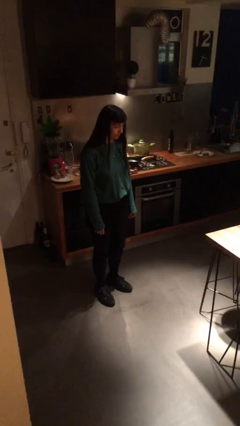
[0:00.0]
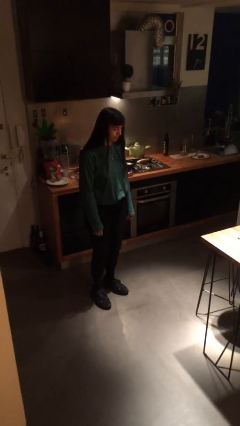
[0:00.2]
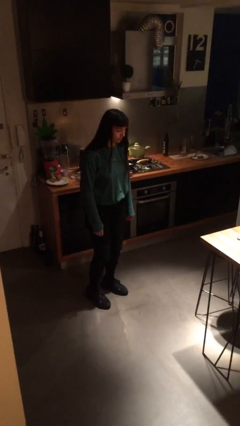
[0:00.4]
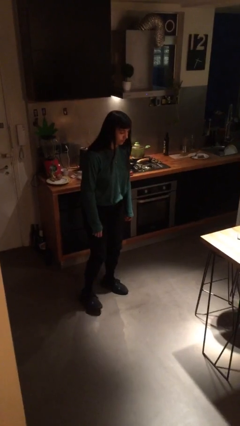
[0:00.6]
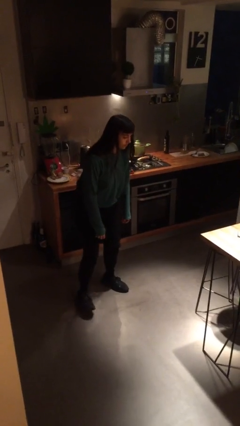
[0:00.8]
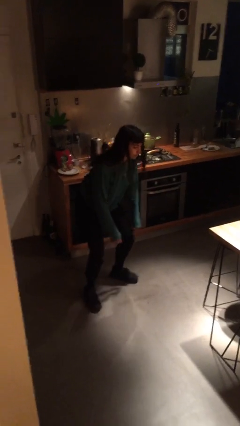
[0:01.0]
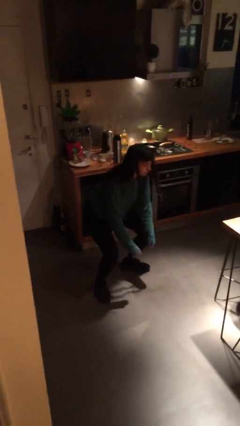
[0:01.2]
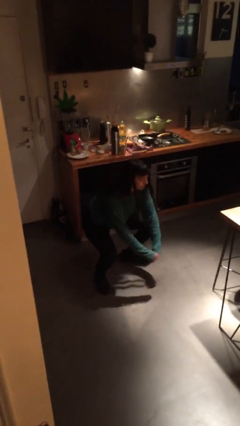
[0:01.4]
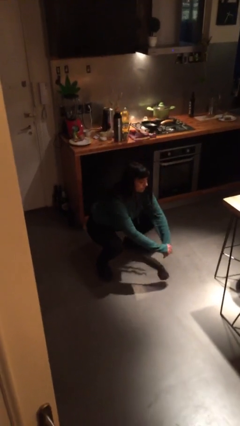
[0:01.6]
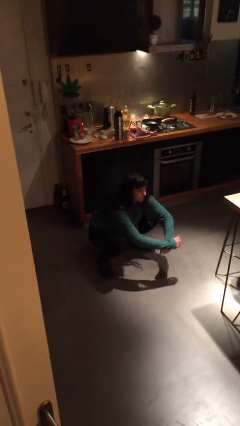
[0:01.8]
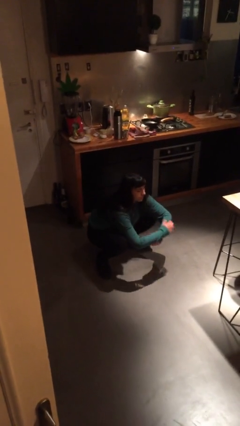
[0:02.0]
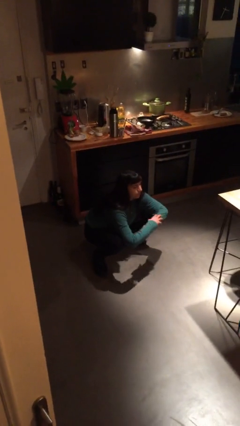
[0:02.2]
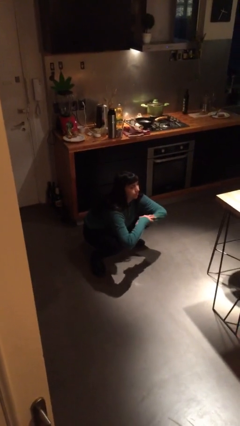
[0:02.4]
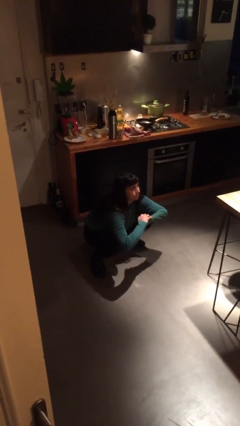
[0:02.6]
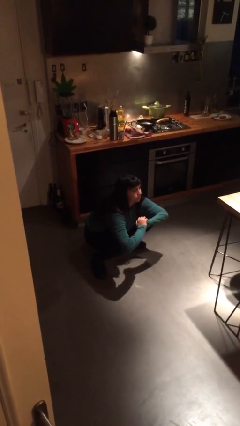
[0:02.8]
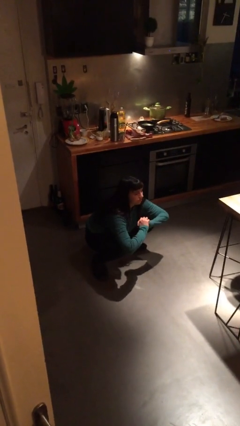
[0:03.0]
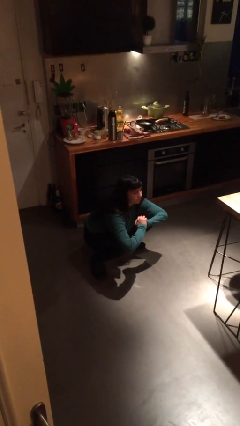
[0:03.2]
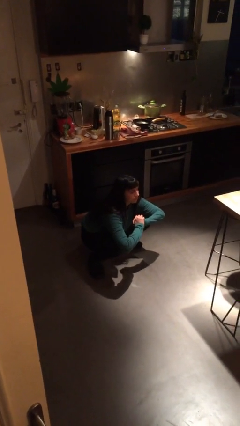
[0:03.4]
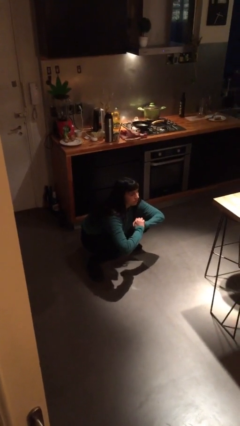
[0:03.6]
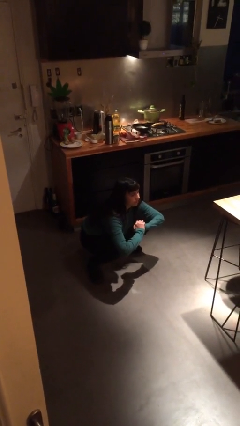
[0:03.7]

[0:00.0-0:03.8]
person squats

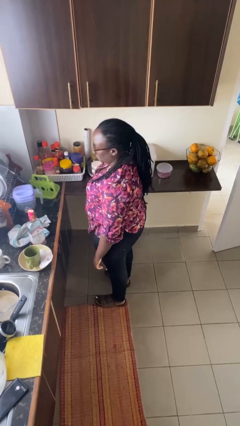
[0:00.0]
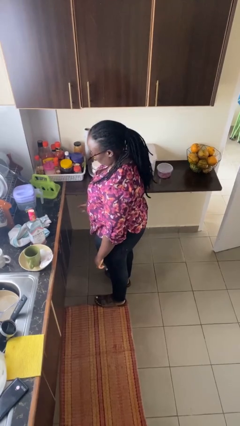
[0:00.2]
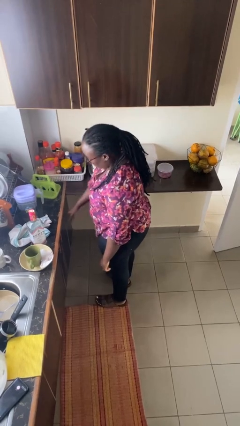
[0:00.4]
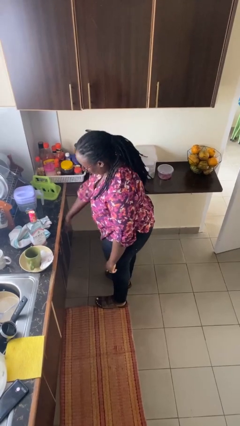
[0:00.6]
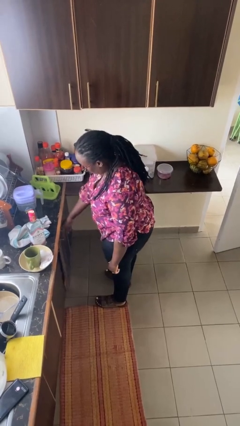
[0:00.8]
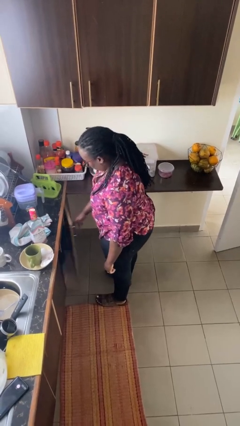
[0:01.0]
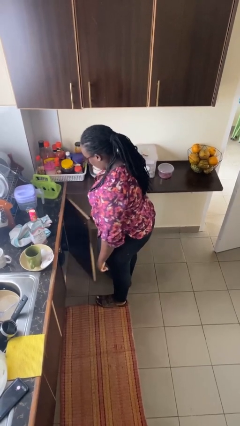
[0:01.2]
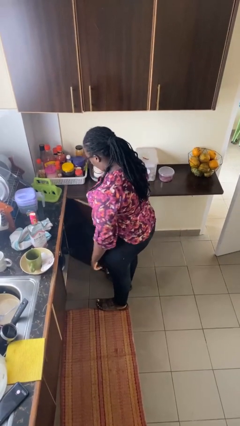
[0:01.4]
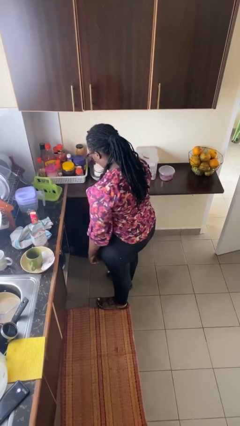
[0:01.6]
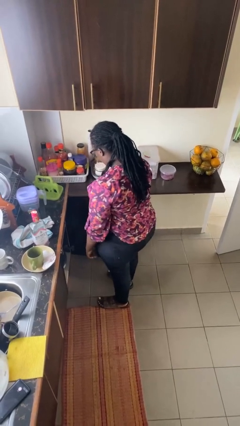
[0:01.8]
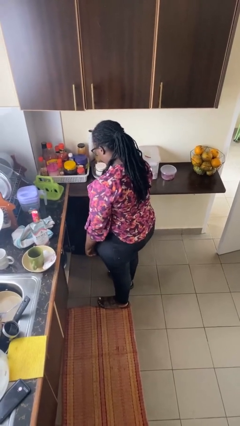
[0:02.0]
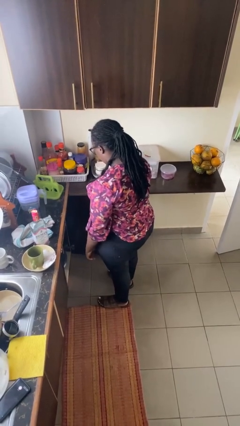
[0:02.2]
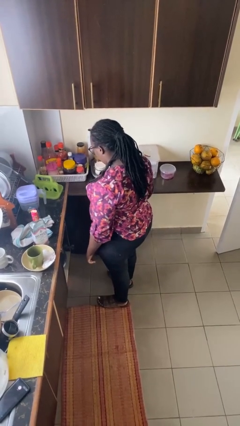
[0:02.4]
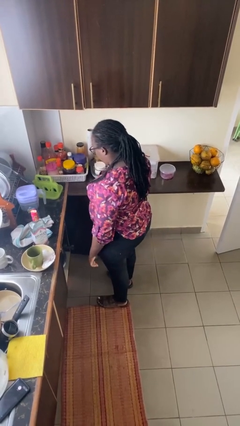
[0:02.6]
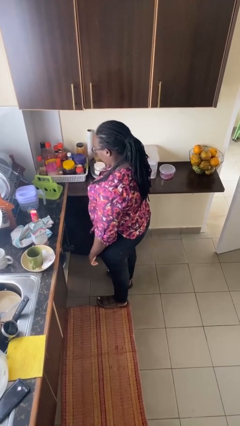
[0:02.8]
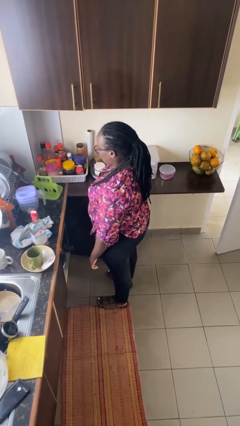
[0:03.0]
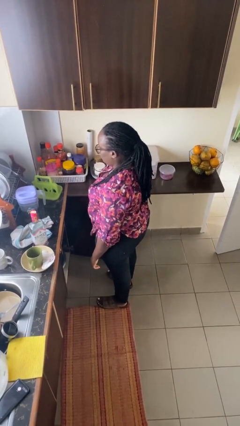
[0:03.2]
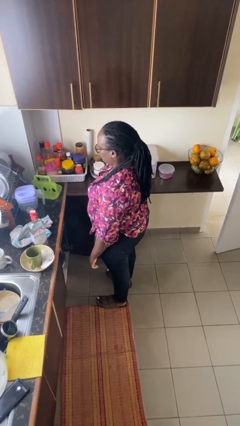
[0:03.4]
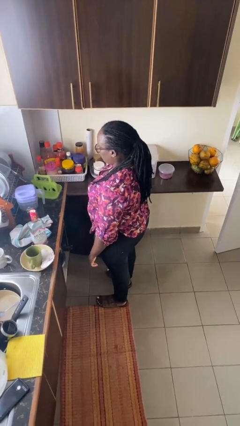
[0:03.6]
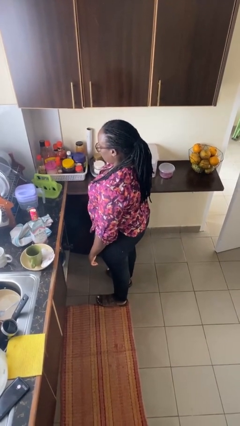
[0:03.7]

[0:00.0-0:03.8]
person opens cabinet

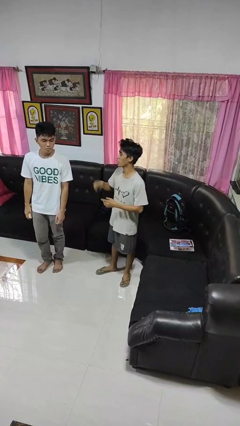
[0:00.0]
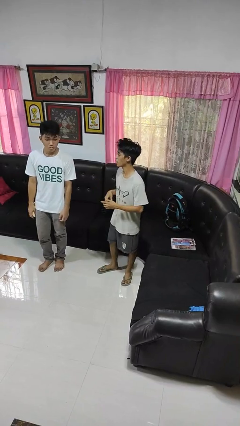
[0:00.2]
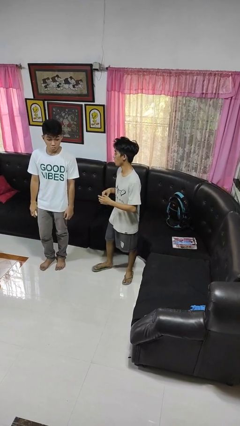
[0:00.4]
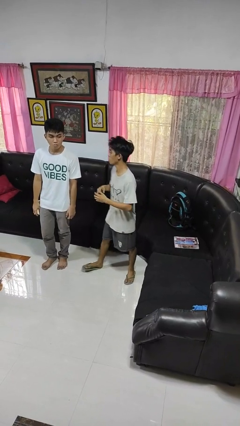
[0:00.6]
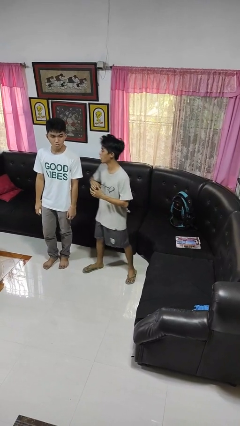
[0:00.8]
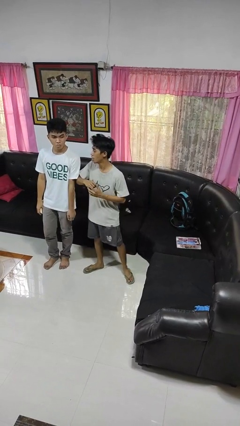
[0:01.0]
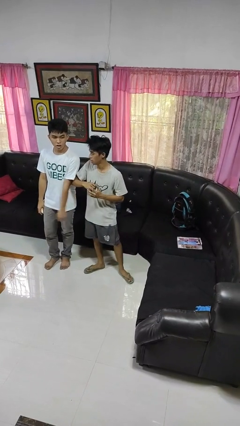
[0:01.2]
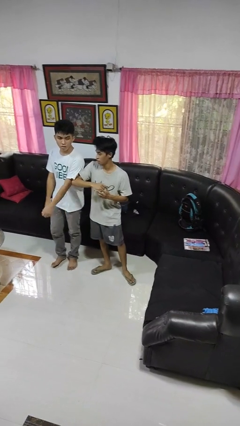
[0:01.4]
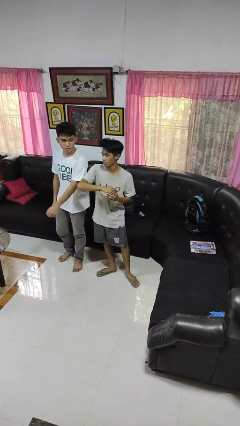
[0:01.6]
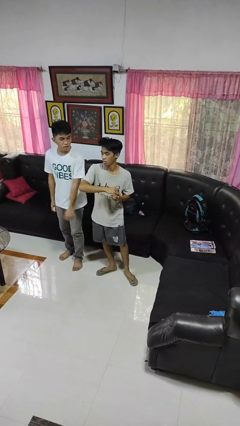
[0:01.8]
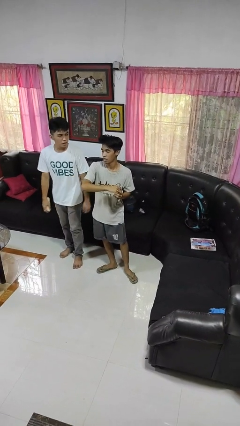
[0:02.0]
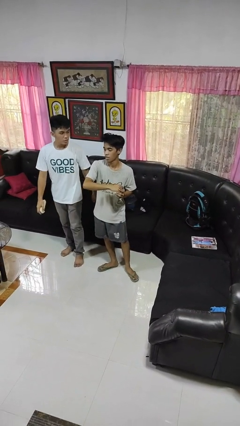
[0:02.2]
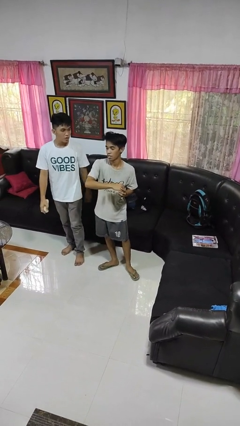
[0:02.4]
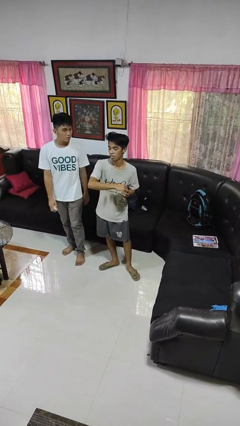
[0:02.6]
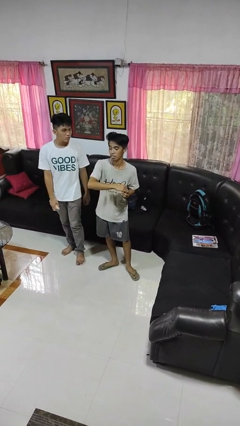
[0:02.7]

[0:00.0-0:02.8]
person nudges person with elbow

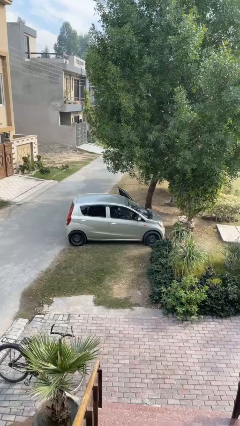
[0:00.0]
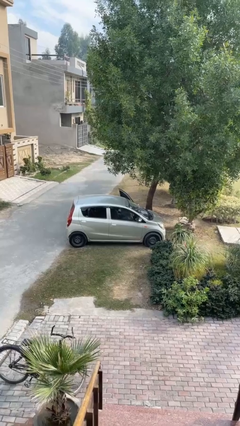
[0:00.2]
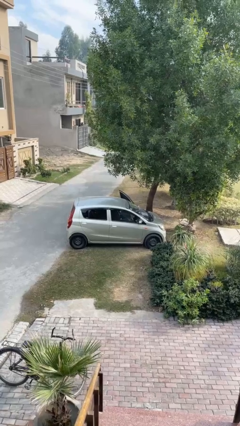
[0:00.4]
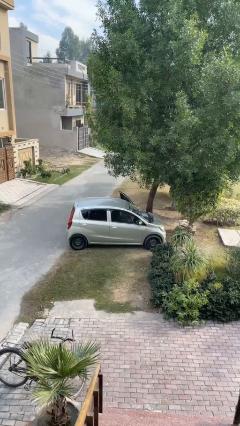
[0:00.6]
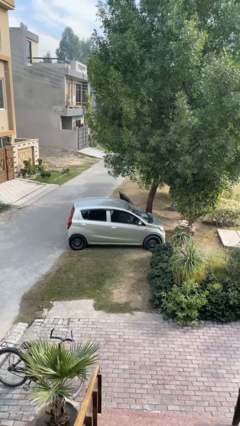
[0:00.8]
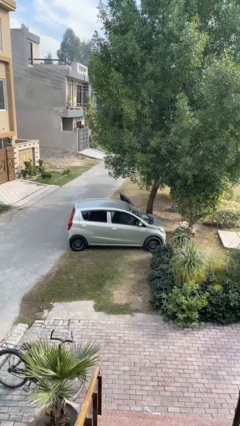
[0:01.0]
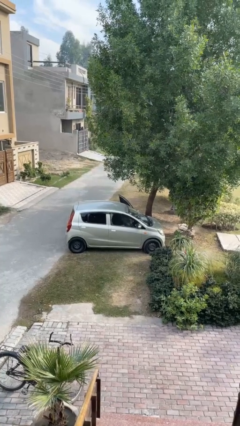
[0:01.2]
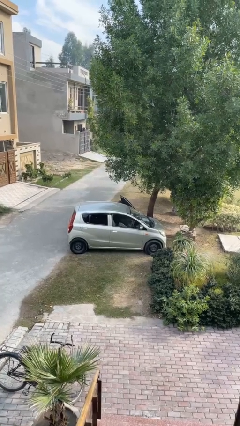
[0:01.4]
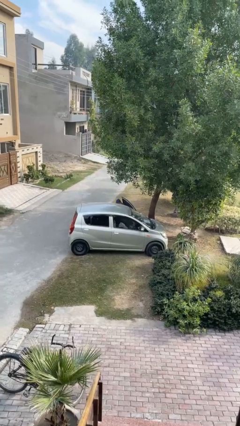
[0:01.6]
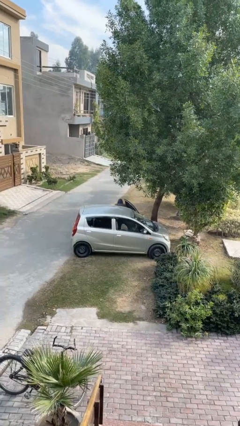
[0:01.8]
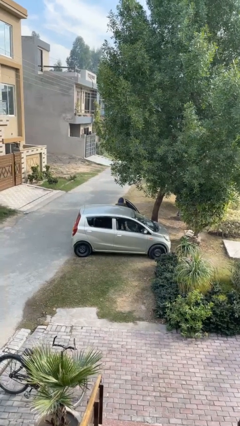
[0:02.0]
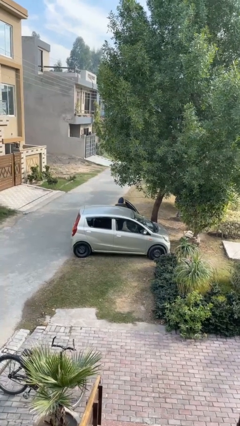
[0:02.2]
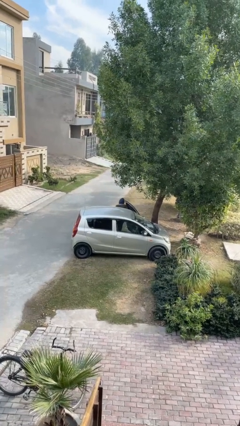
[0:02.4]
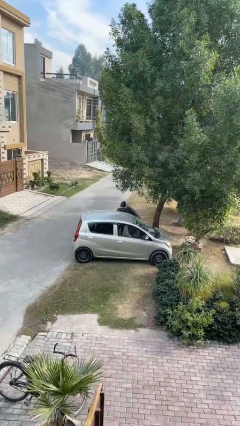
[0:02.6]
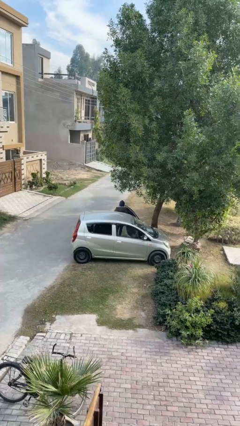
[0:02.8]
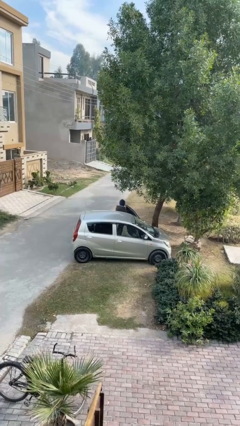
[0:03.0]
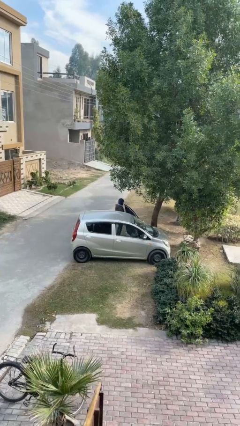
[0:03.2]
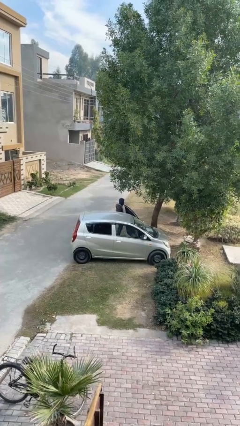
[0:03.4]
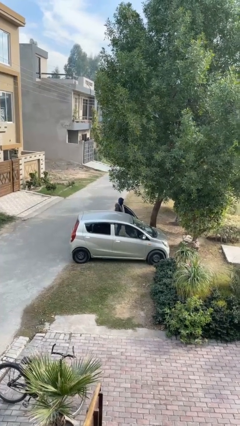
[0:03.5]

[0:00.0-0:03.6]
person exits car

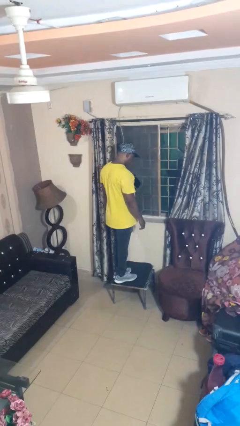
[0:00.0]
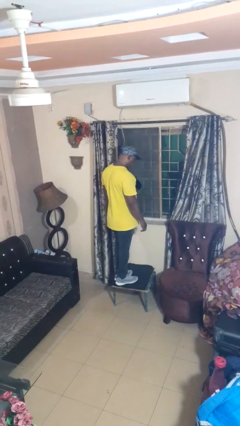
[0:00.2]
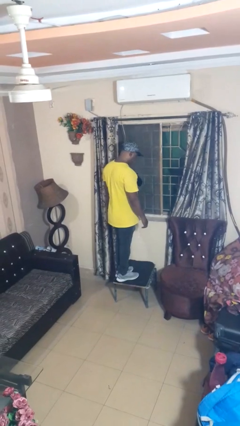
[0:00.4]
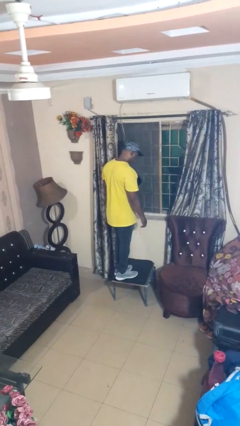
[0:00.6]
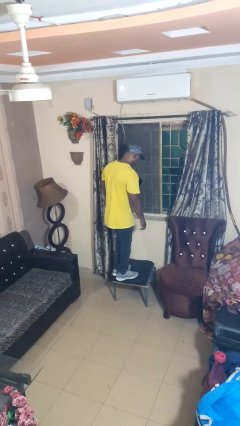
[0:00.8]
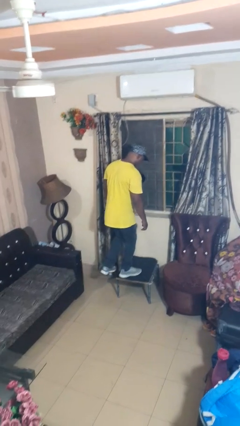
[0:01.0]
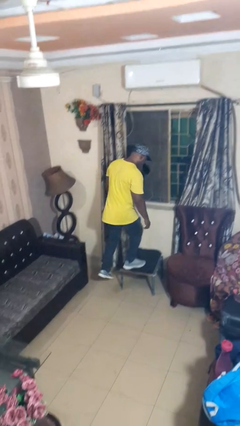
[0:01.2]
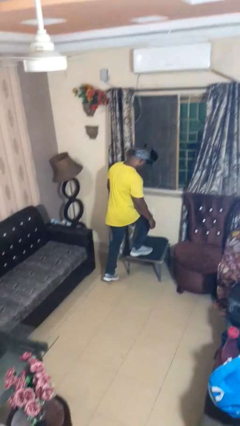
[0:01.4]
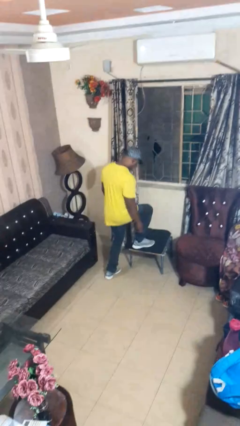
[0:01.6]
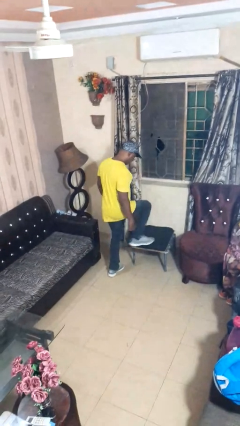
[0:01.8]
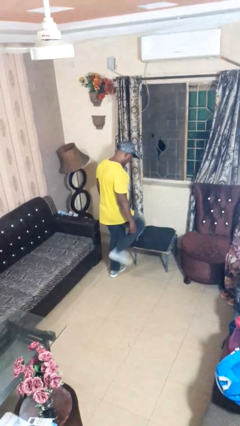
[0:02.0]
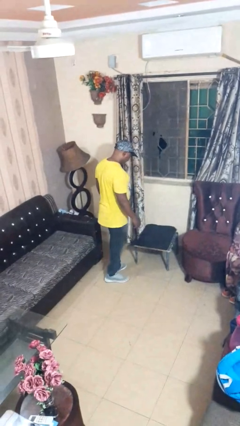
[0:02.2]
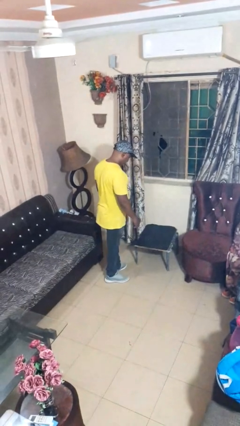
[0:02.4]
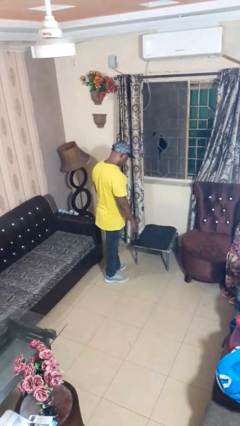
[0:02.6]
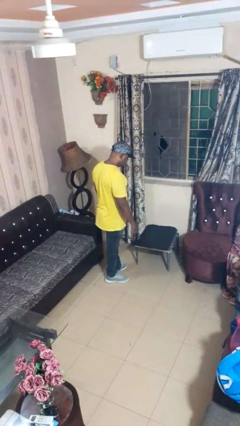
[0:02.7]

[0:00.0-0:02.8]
person climbs off table

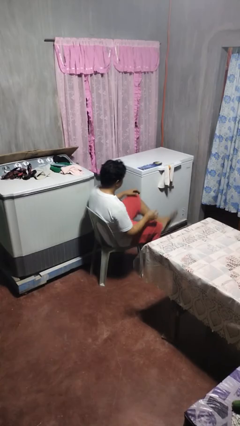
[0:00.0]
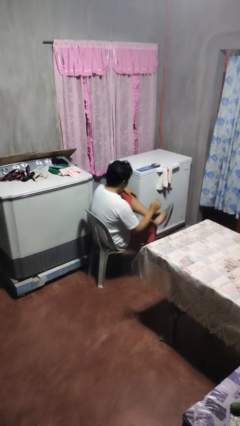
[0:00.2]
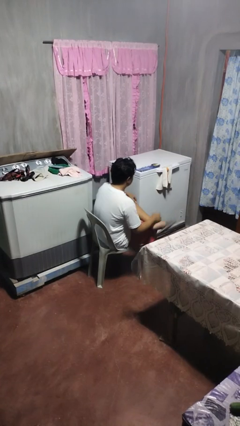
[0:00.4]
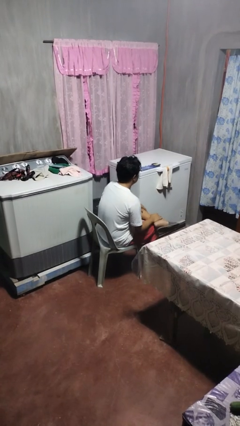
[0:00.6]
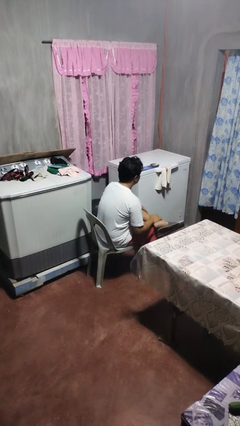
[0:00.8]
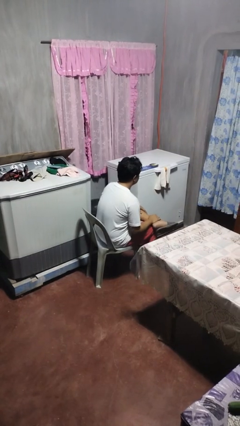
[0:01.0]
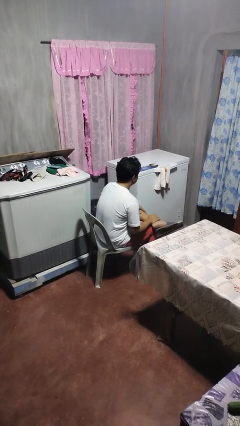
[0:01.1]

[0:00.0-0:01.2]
person crosses legs
